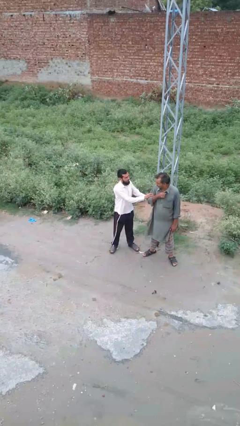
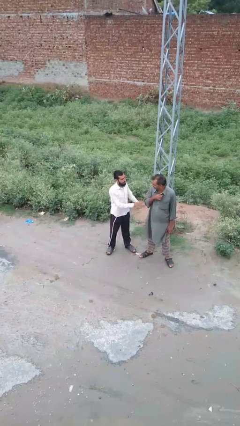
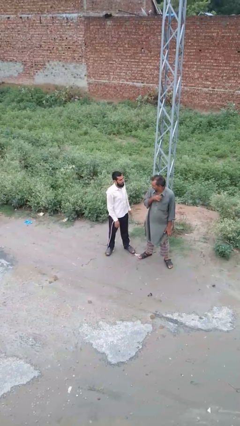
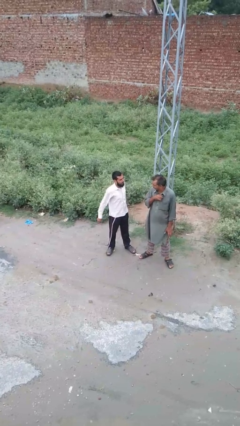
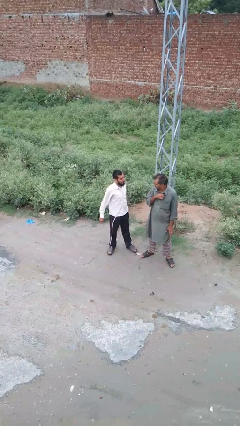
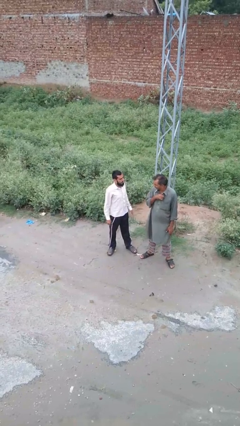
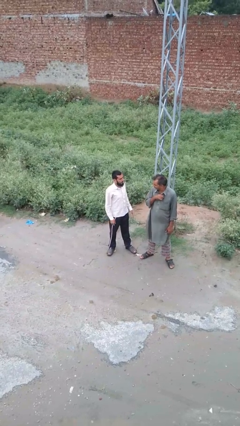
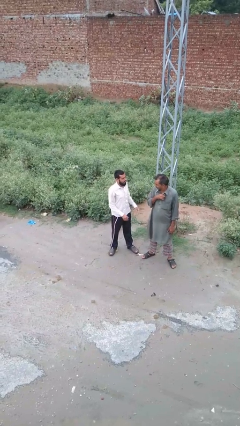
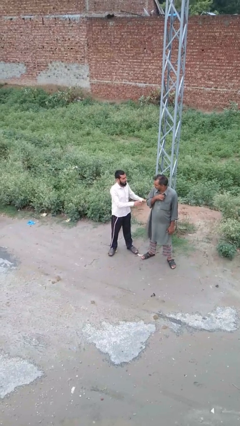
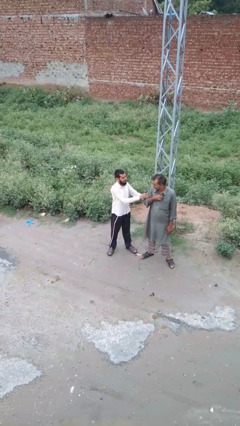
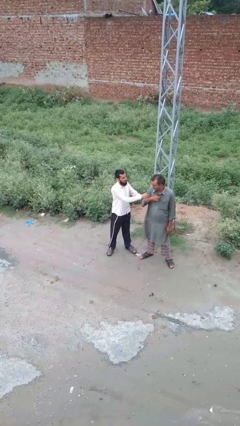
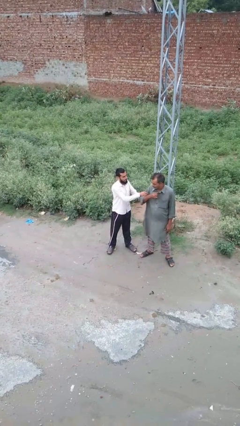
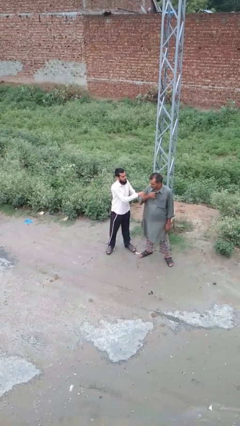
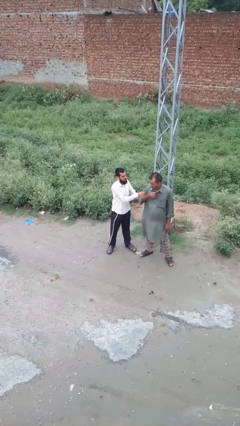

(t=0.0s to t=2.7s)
person grabs person by bicep

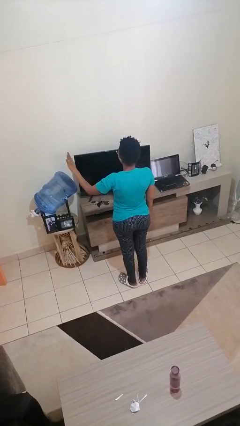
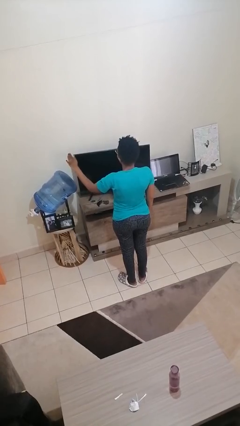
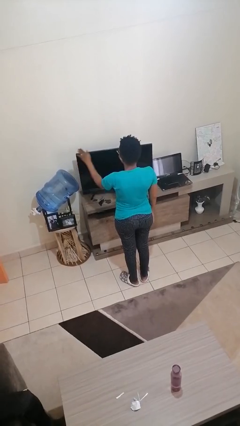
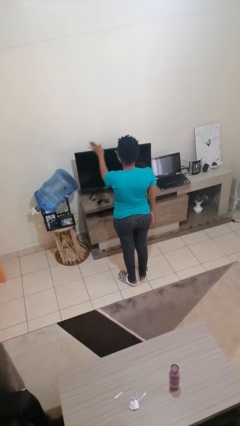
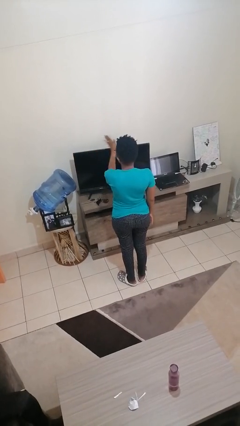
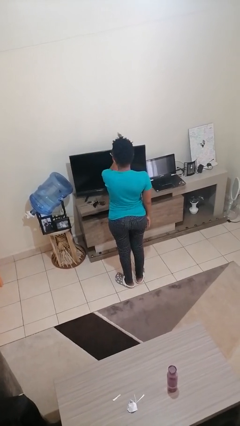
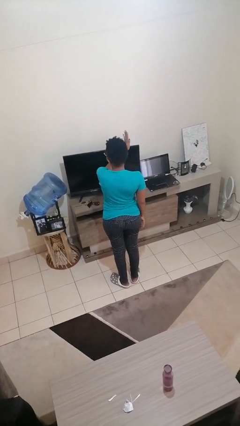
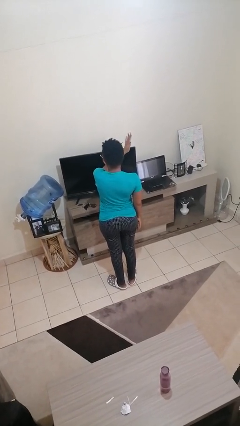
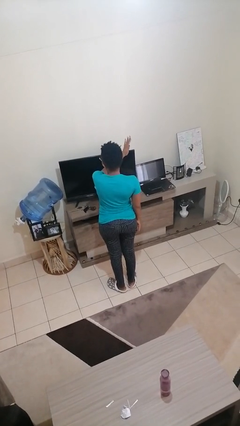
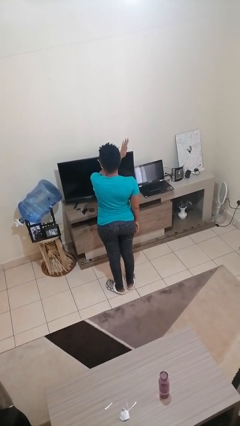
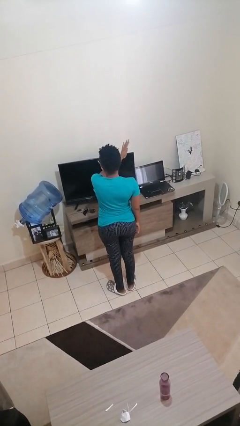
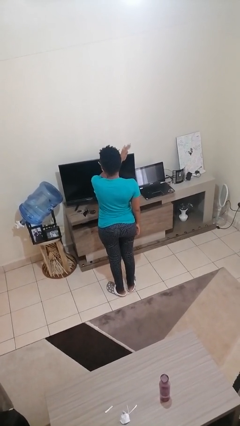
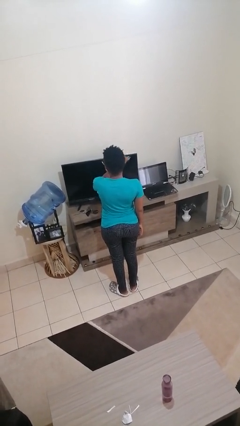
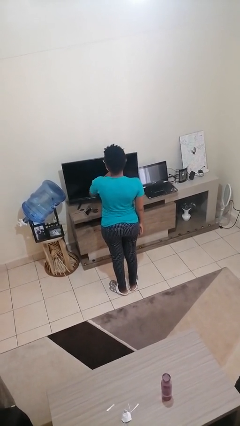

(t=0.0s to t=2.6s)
person gestures swipe right

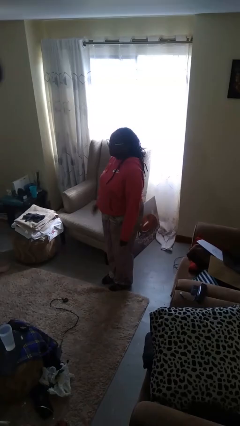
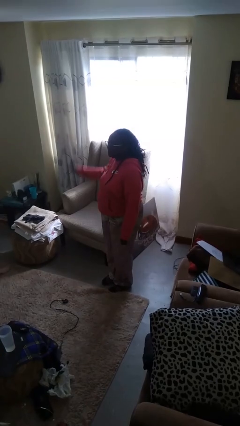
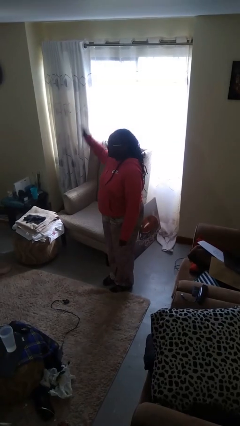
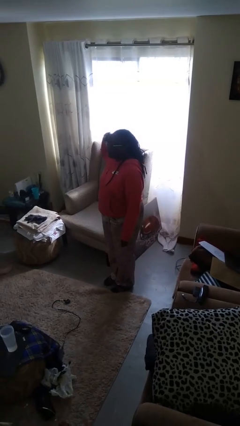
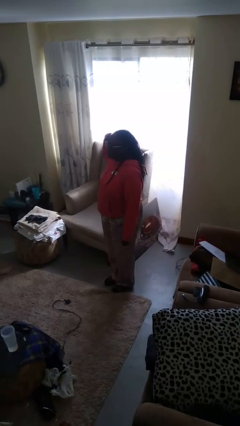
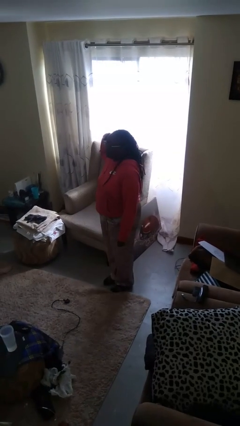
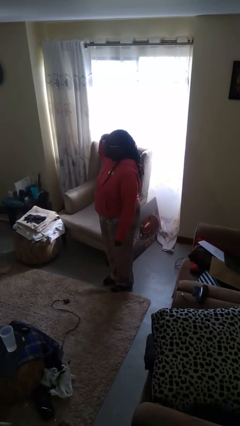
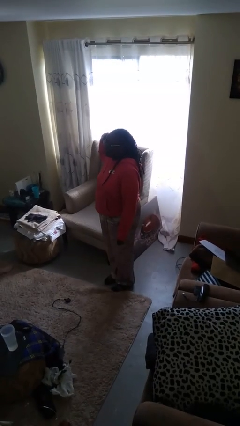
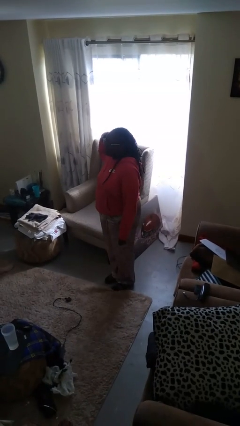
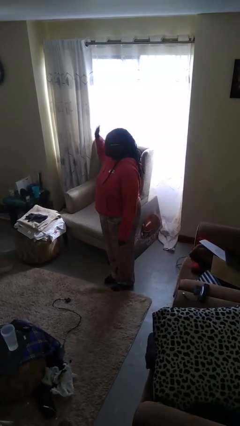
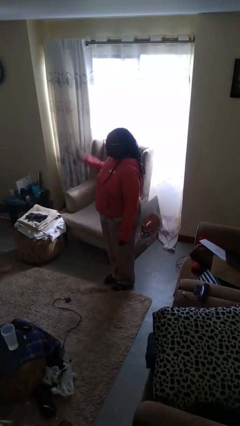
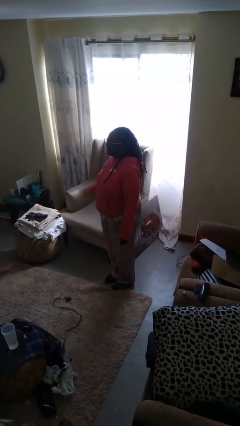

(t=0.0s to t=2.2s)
person salutes

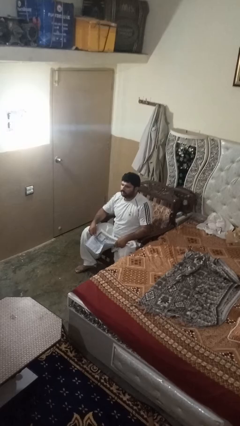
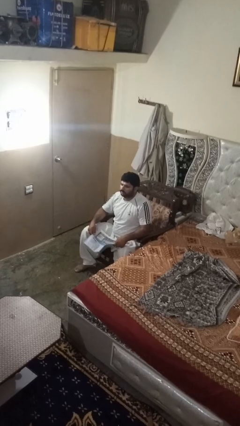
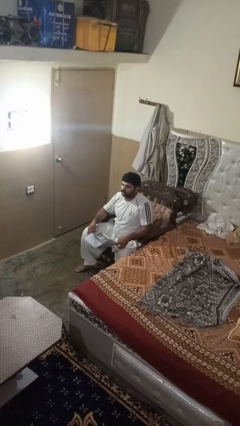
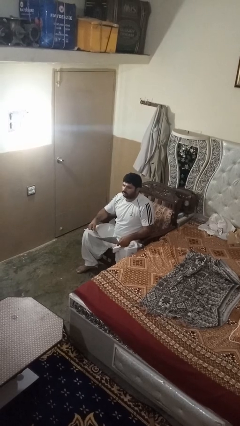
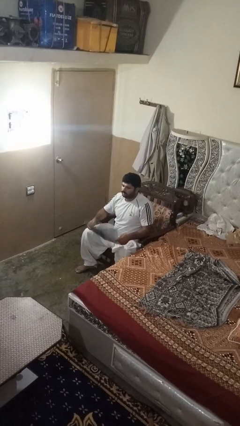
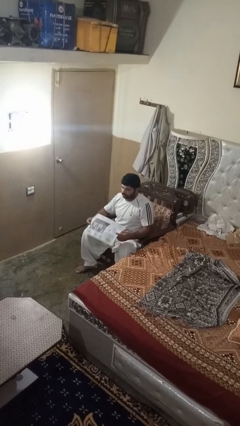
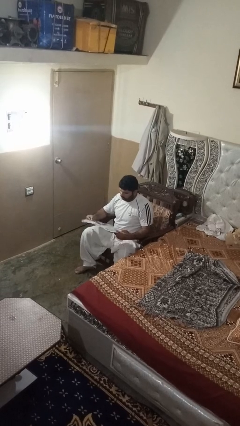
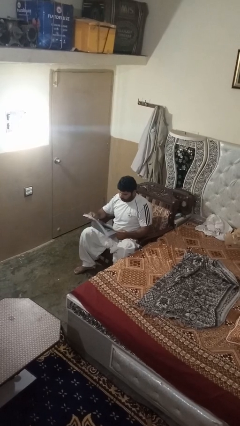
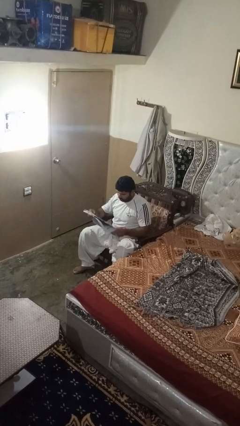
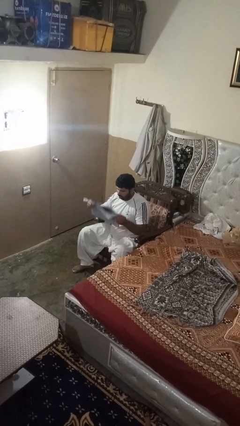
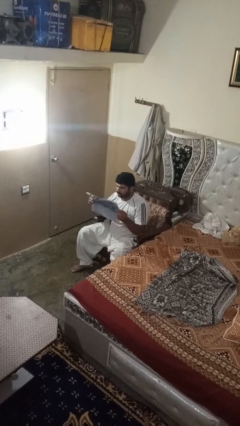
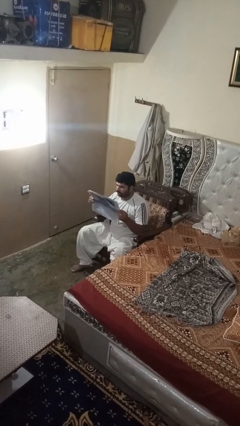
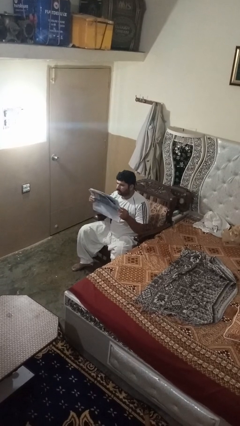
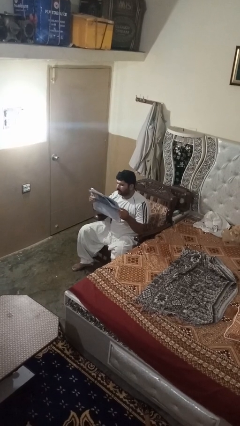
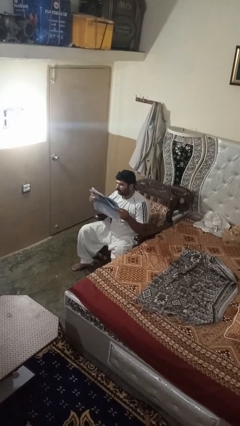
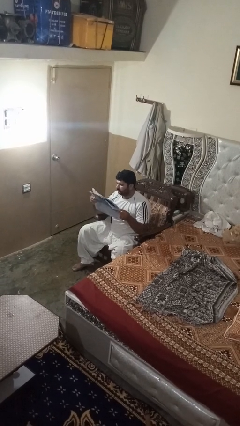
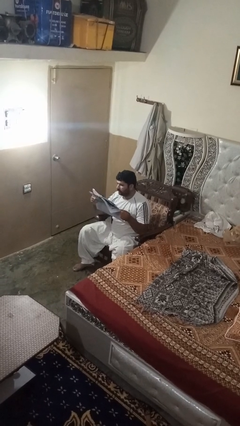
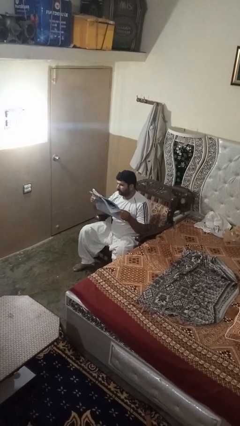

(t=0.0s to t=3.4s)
person reads newspaper

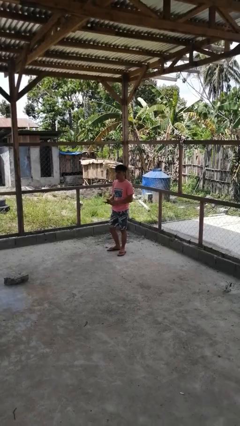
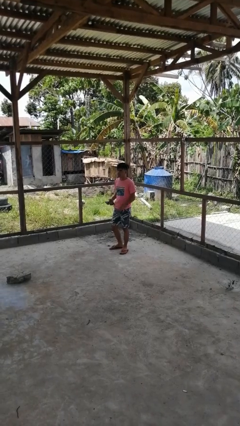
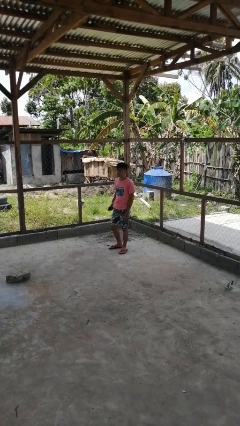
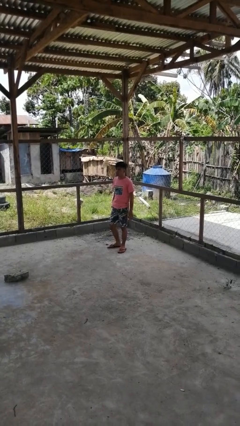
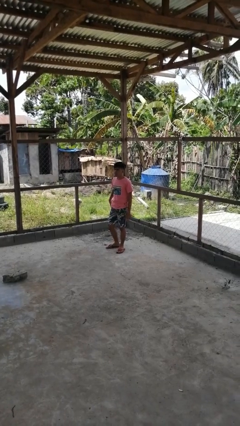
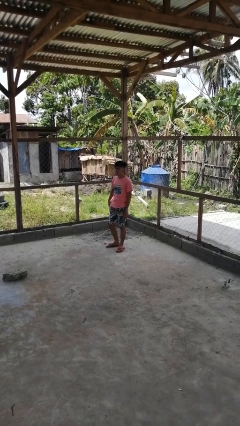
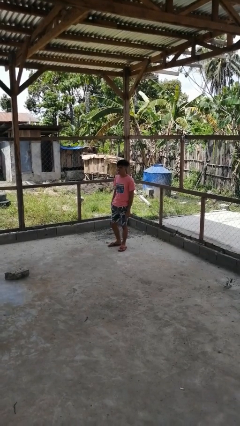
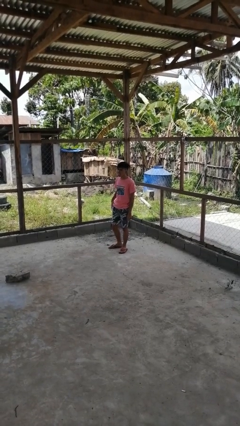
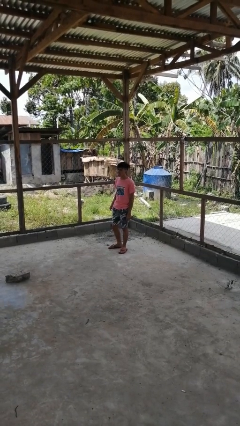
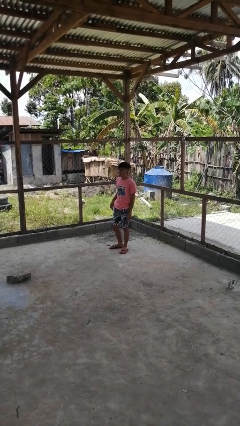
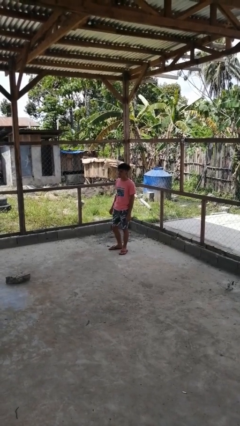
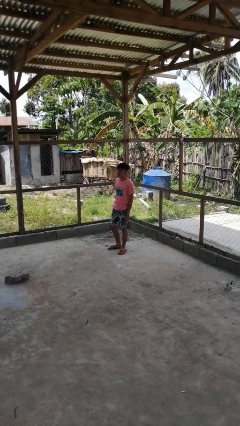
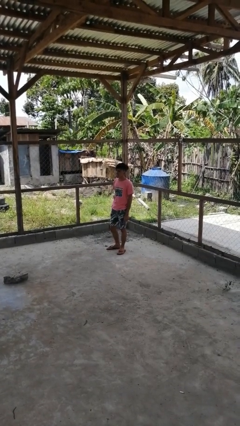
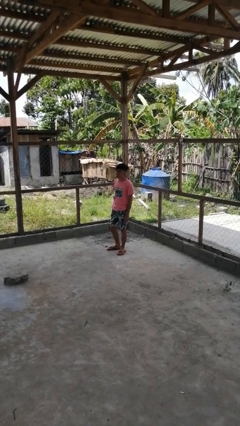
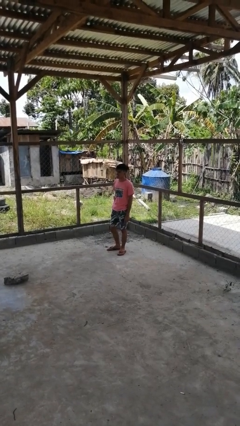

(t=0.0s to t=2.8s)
person puts phone into pocket

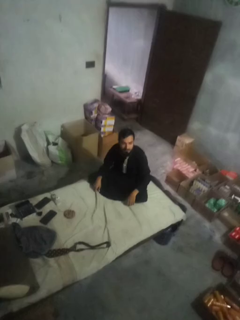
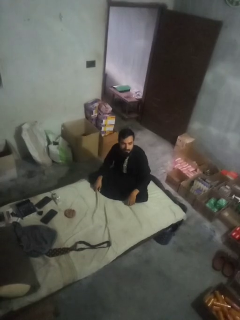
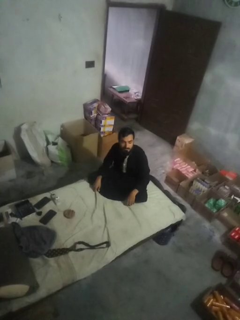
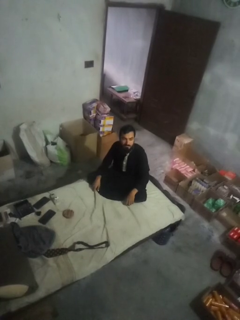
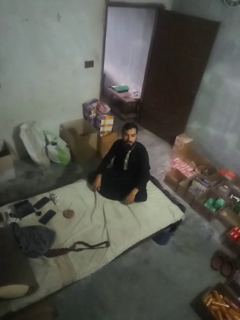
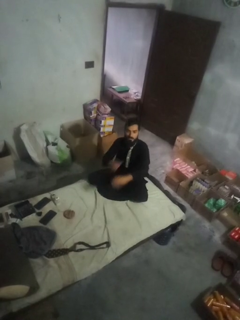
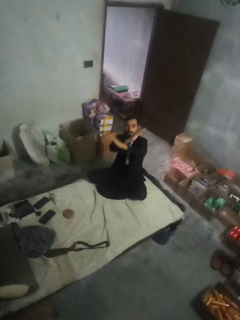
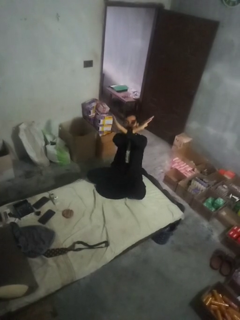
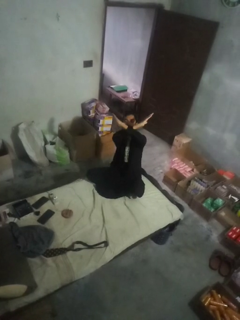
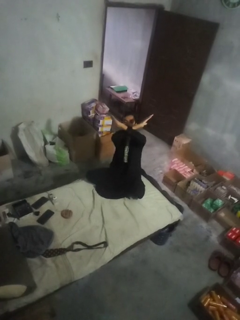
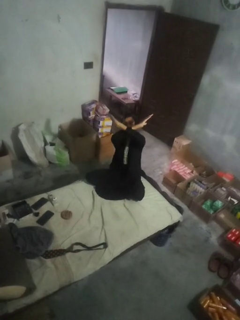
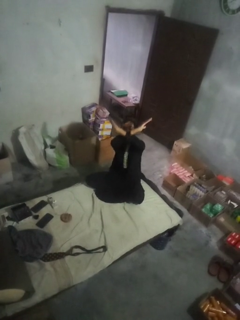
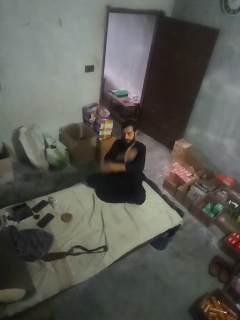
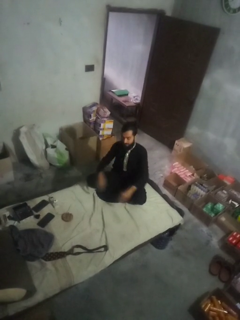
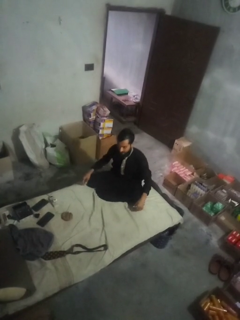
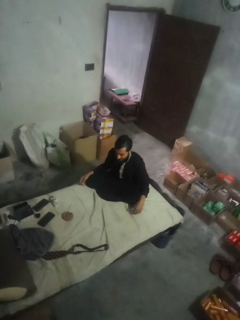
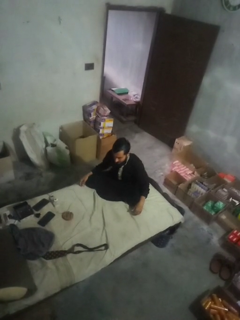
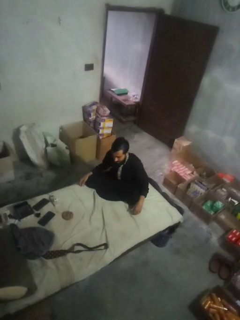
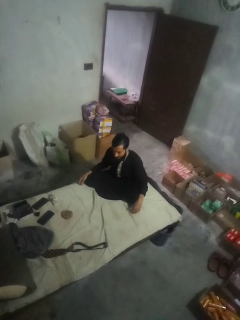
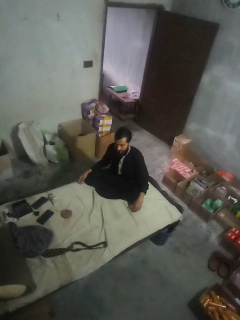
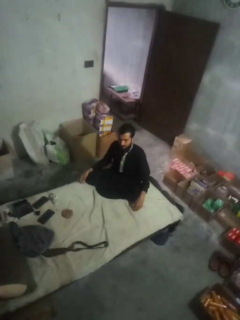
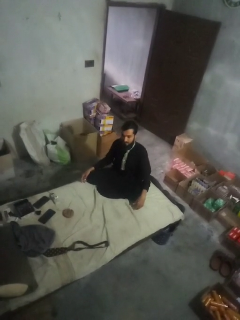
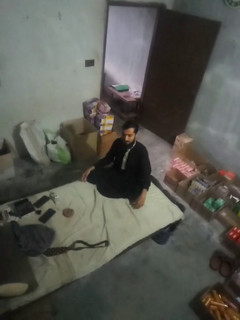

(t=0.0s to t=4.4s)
person gestures arms x
